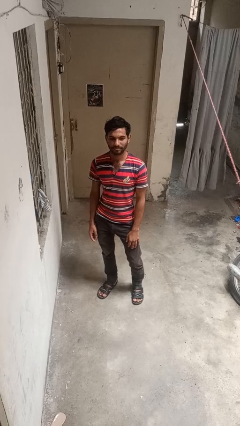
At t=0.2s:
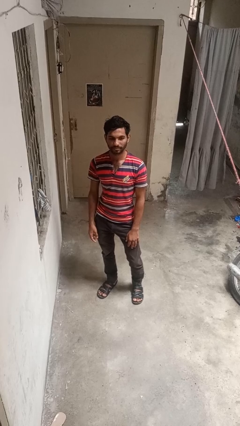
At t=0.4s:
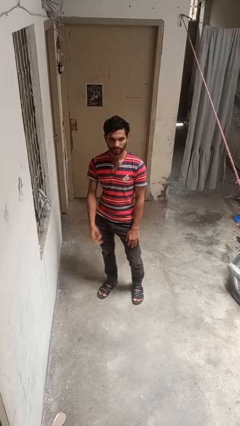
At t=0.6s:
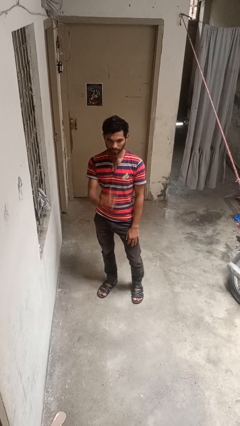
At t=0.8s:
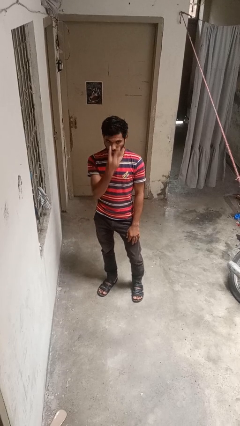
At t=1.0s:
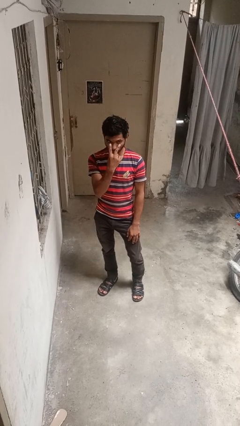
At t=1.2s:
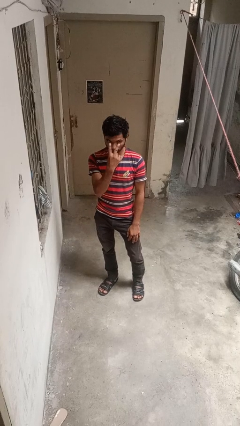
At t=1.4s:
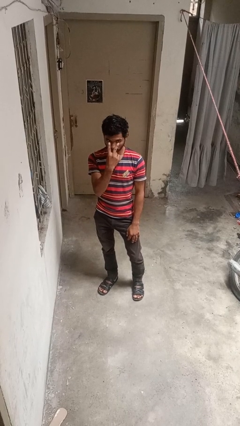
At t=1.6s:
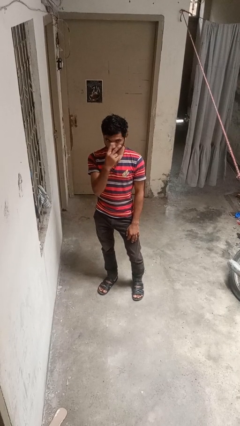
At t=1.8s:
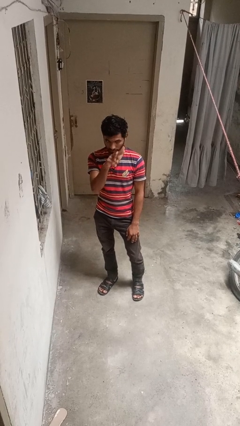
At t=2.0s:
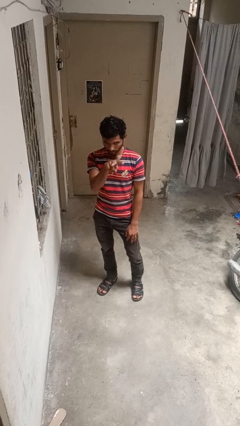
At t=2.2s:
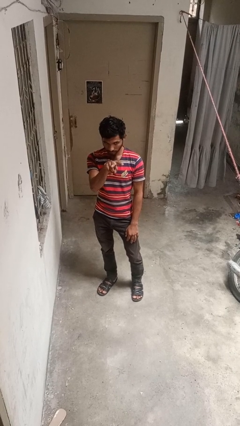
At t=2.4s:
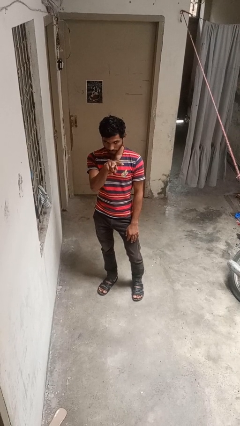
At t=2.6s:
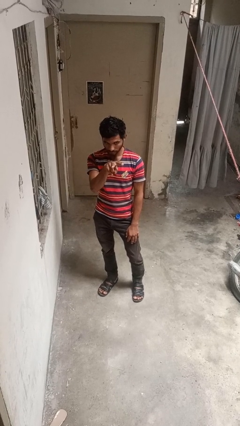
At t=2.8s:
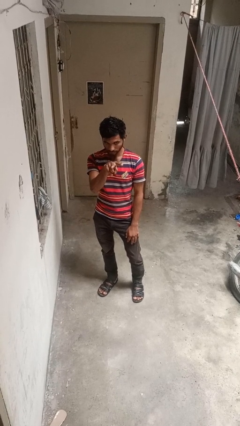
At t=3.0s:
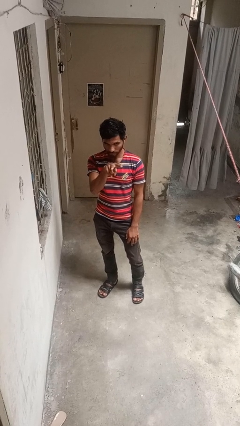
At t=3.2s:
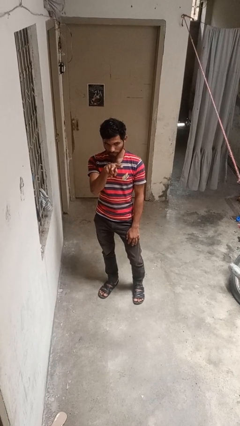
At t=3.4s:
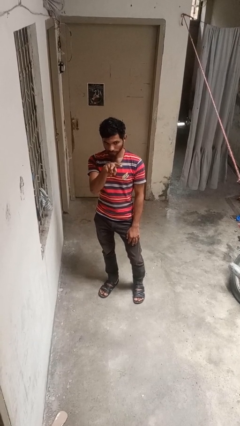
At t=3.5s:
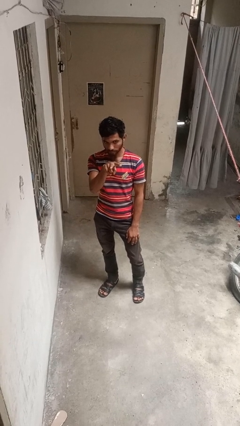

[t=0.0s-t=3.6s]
person gestures watch closely

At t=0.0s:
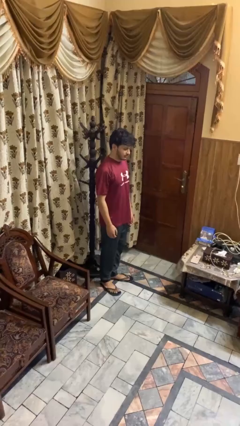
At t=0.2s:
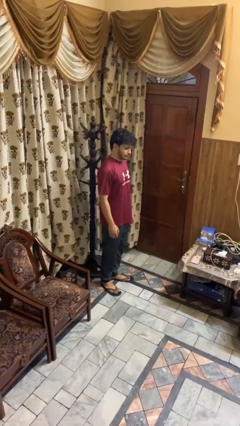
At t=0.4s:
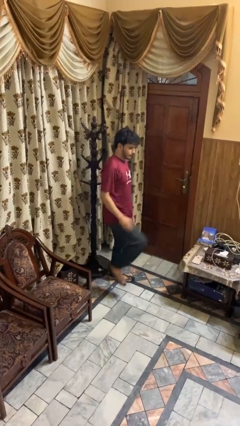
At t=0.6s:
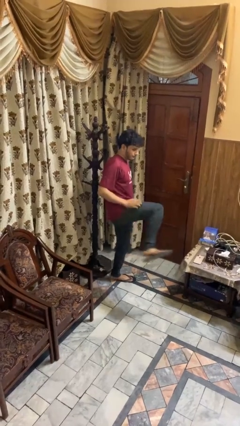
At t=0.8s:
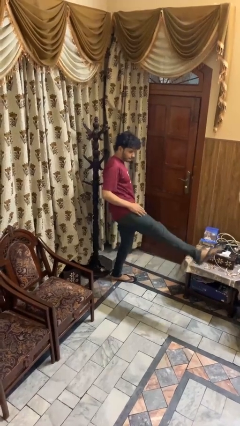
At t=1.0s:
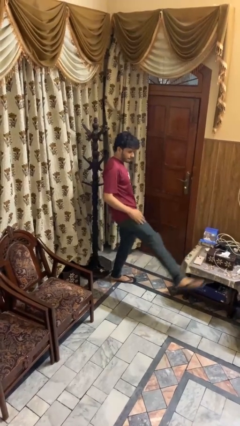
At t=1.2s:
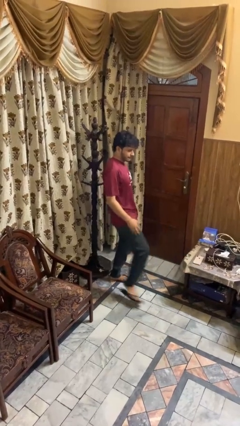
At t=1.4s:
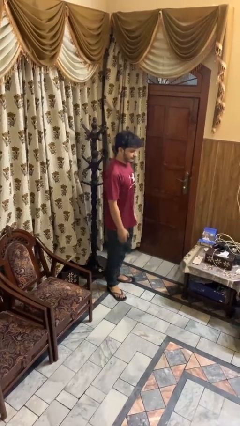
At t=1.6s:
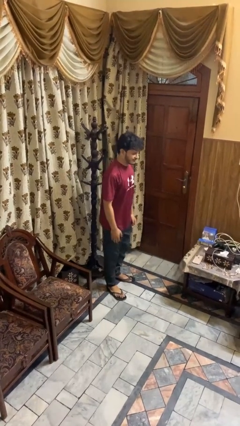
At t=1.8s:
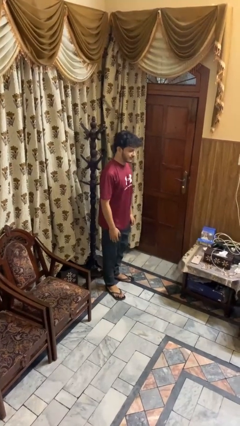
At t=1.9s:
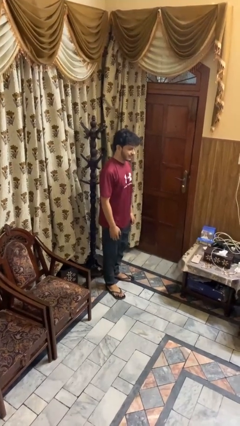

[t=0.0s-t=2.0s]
person karate kicks

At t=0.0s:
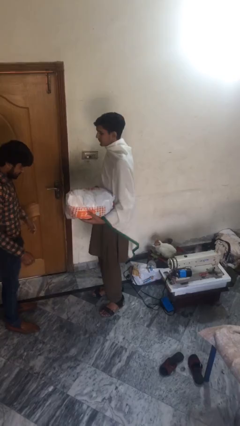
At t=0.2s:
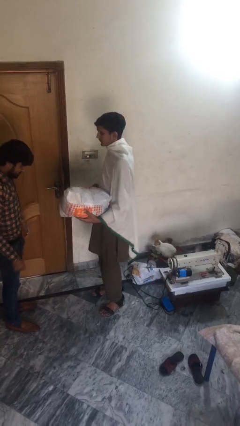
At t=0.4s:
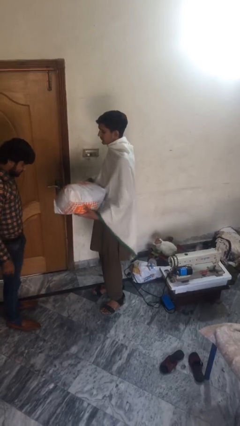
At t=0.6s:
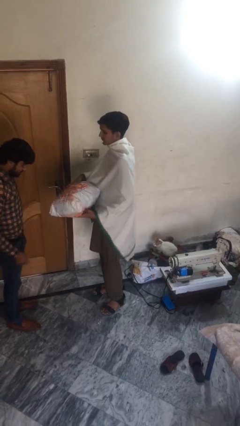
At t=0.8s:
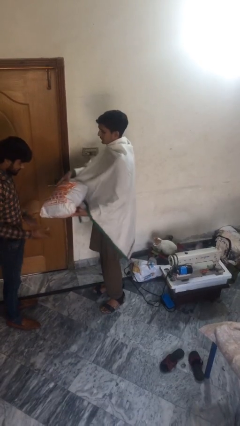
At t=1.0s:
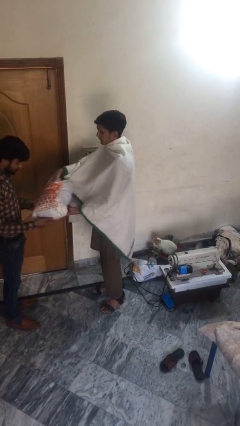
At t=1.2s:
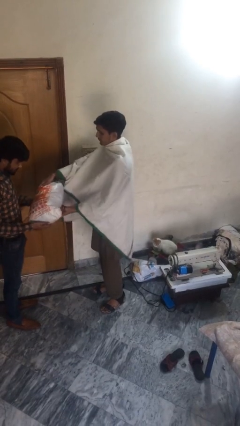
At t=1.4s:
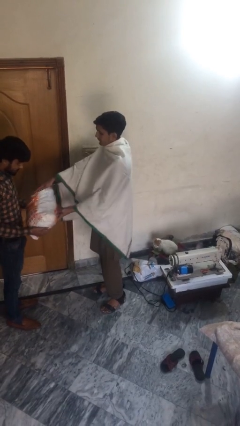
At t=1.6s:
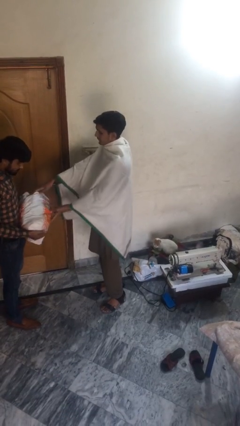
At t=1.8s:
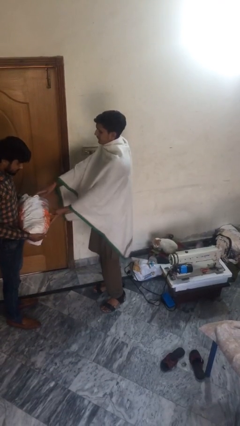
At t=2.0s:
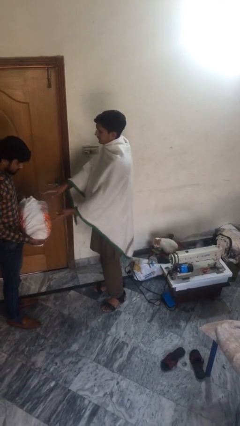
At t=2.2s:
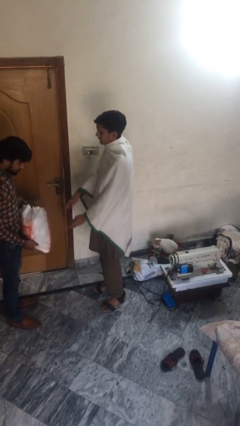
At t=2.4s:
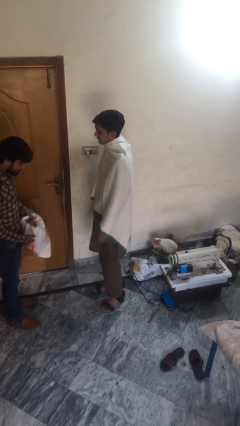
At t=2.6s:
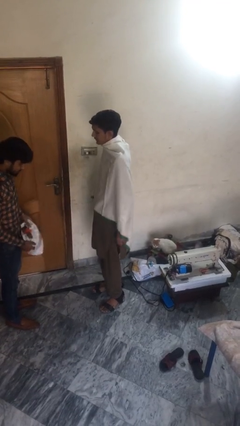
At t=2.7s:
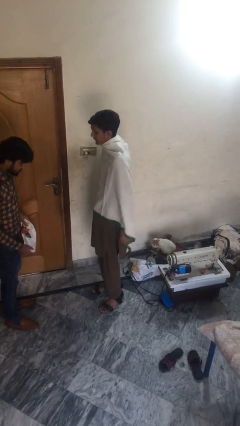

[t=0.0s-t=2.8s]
person transfers object to person

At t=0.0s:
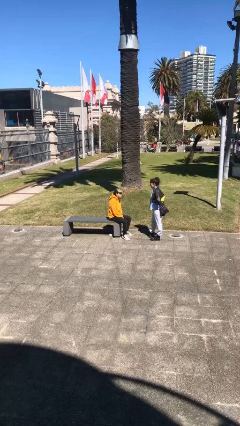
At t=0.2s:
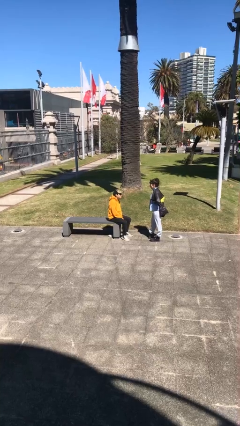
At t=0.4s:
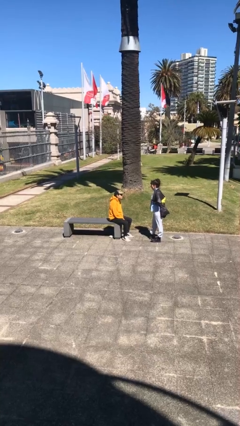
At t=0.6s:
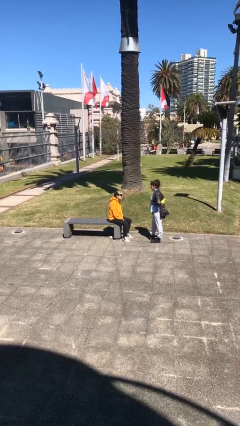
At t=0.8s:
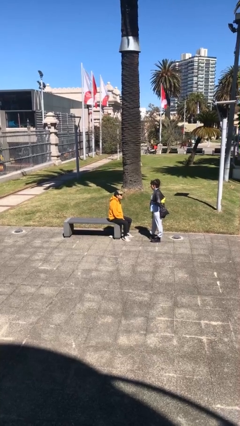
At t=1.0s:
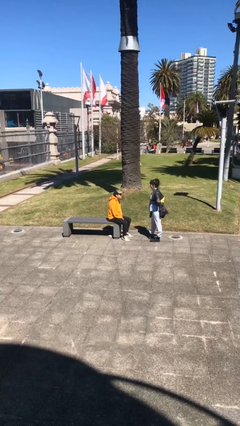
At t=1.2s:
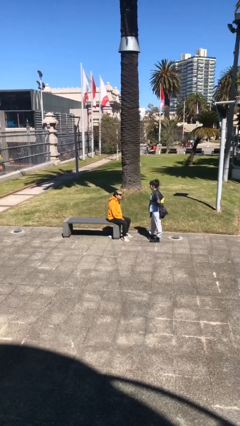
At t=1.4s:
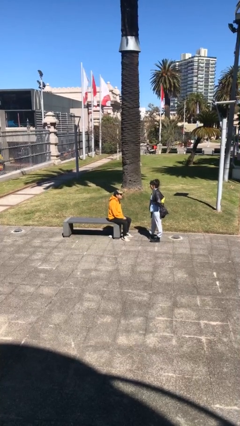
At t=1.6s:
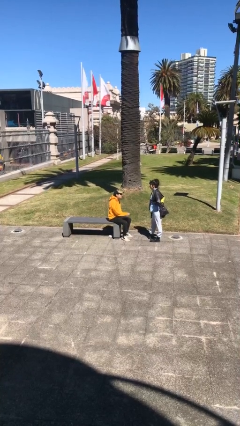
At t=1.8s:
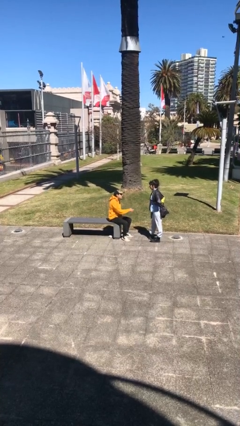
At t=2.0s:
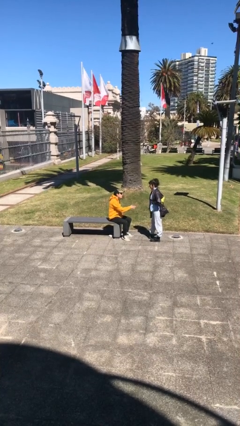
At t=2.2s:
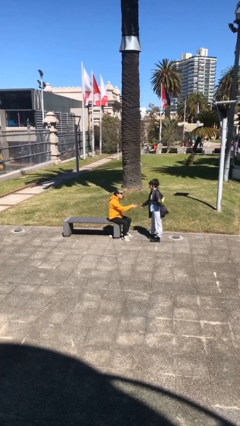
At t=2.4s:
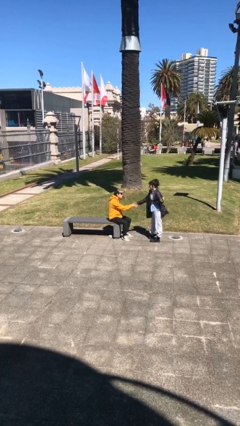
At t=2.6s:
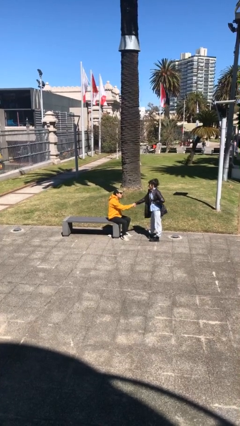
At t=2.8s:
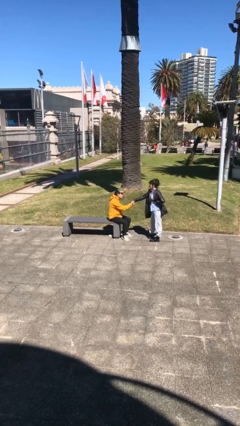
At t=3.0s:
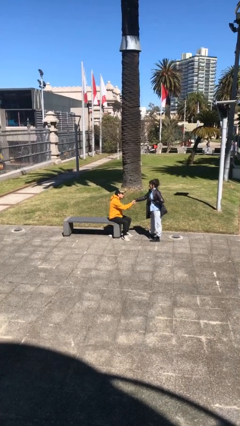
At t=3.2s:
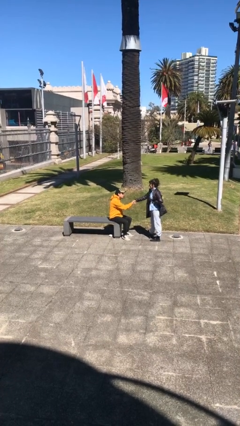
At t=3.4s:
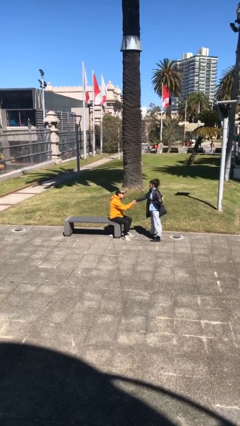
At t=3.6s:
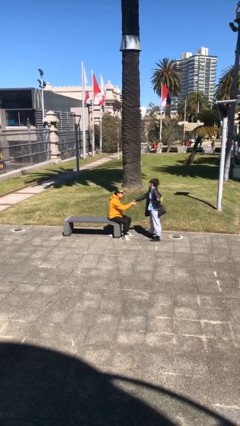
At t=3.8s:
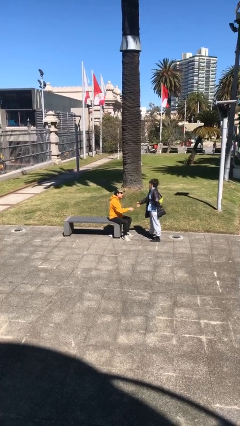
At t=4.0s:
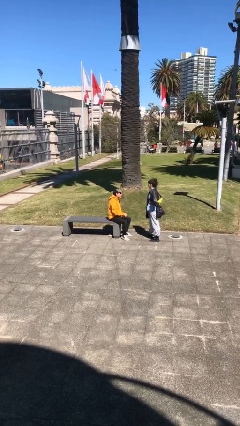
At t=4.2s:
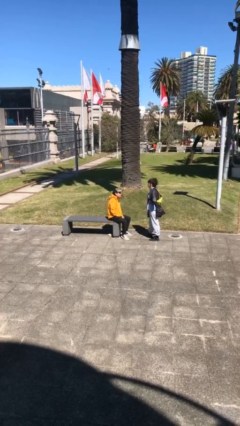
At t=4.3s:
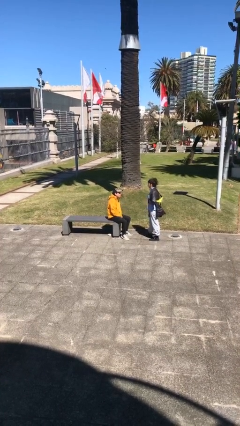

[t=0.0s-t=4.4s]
person shakes hand

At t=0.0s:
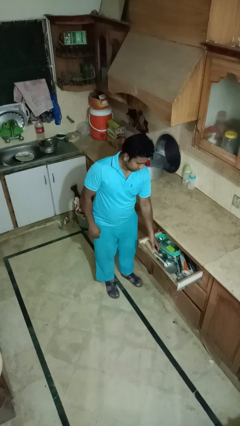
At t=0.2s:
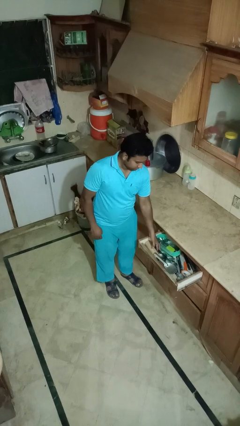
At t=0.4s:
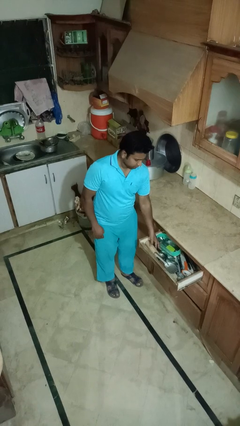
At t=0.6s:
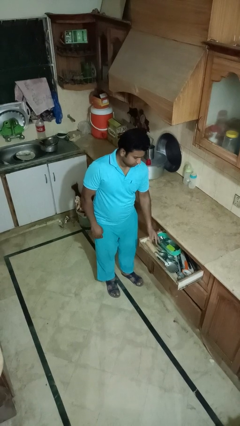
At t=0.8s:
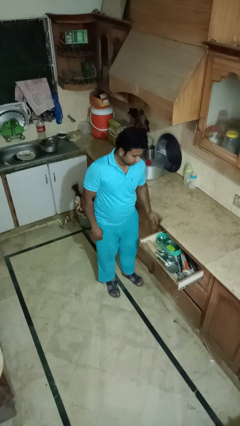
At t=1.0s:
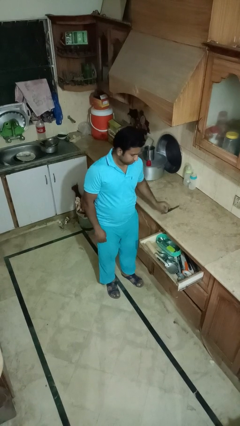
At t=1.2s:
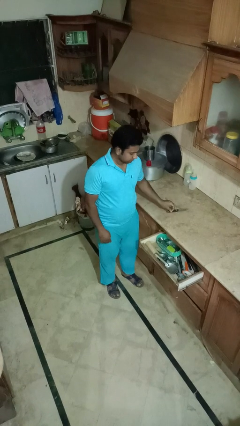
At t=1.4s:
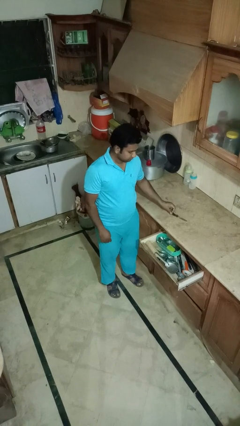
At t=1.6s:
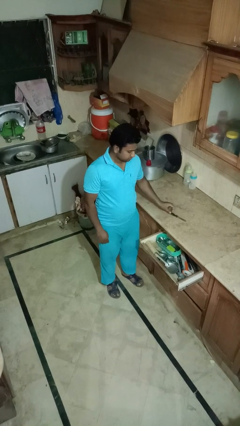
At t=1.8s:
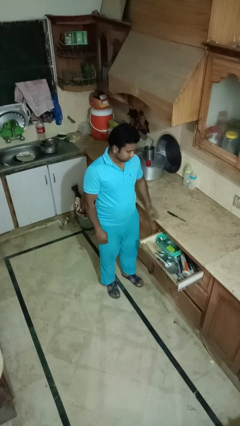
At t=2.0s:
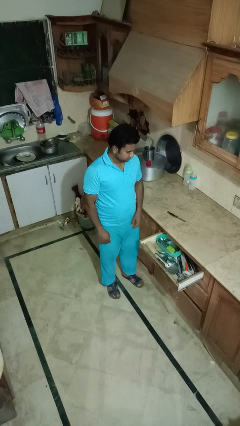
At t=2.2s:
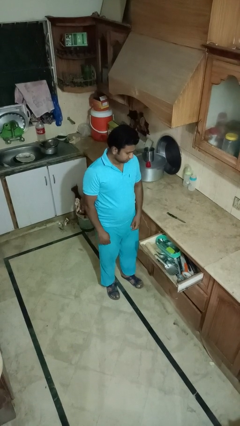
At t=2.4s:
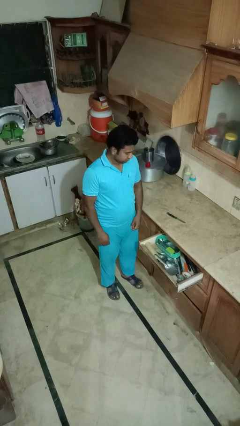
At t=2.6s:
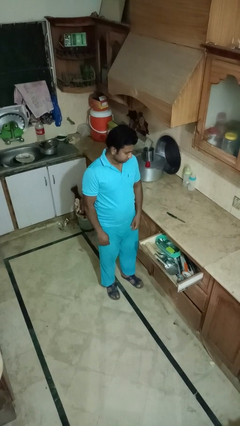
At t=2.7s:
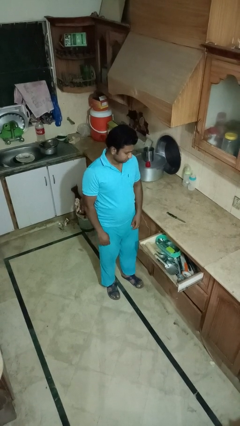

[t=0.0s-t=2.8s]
person takes object from kitchen drawer

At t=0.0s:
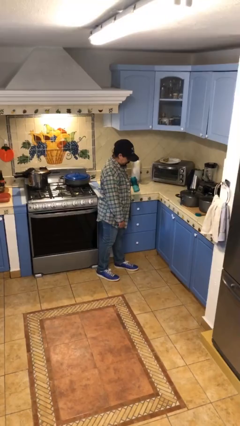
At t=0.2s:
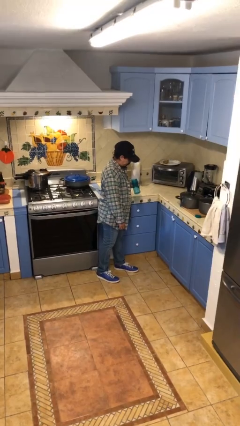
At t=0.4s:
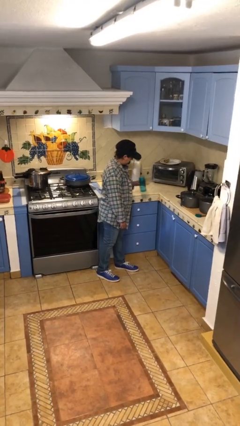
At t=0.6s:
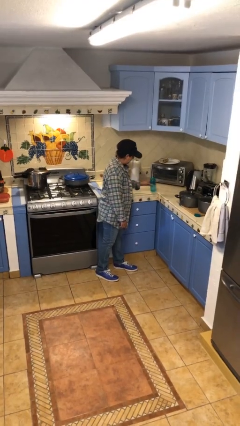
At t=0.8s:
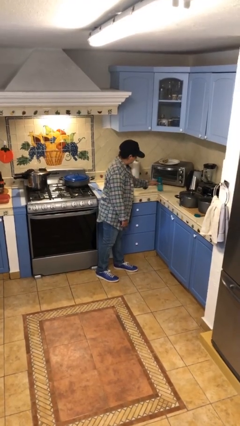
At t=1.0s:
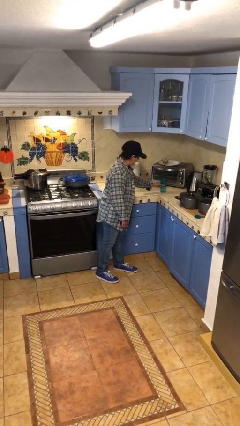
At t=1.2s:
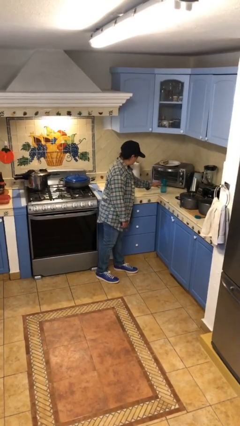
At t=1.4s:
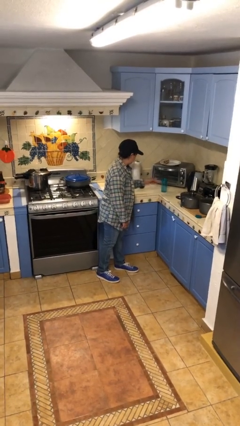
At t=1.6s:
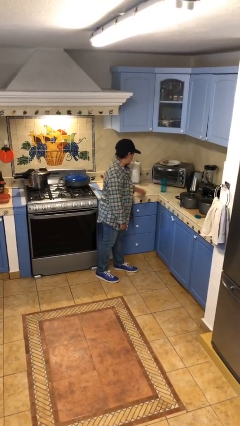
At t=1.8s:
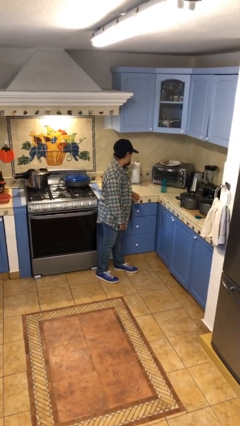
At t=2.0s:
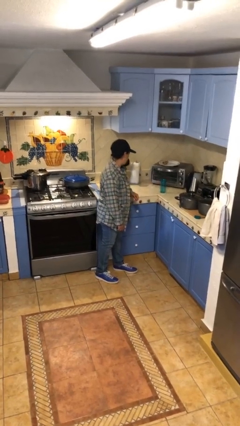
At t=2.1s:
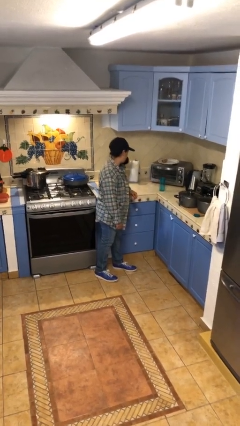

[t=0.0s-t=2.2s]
person puts down object on countertop
